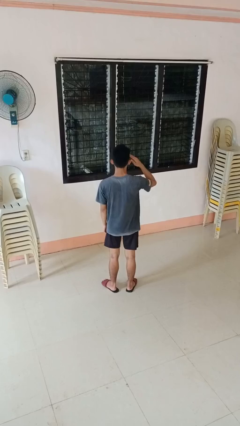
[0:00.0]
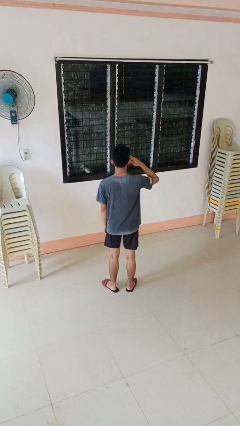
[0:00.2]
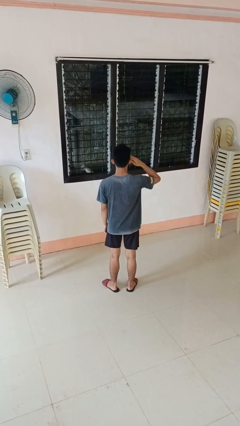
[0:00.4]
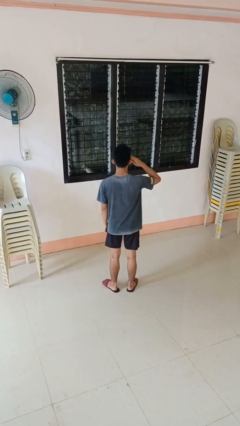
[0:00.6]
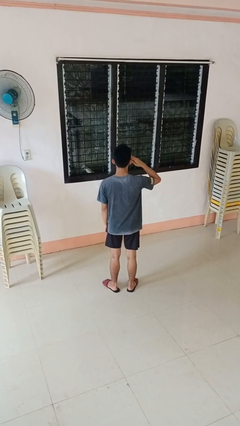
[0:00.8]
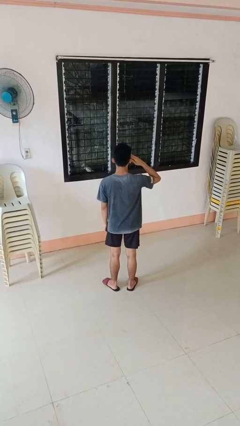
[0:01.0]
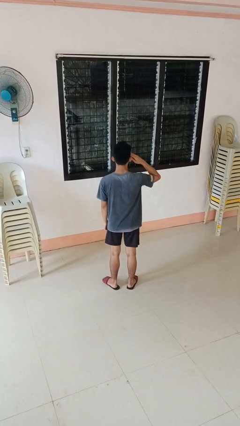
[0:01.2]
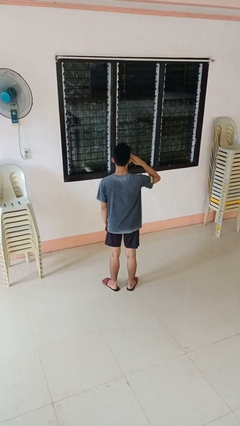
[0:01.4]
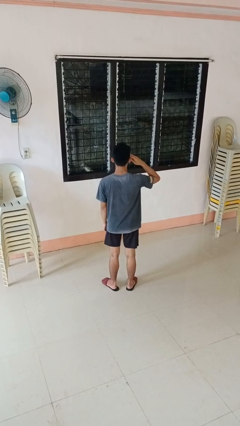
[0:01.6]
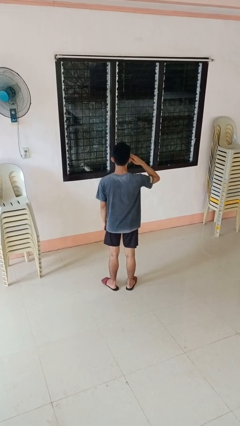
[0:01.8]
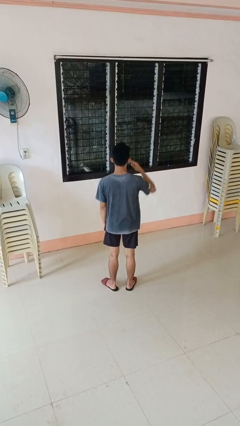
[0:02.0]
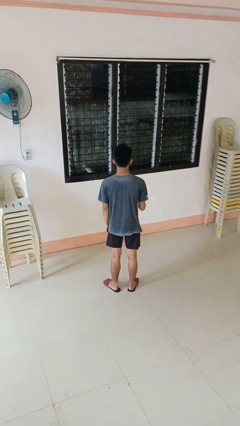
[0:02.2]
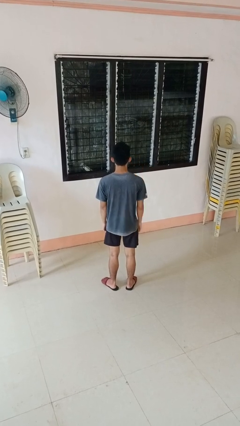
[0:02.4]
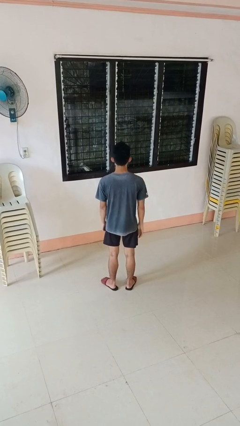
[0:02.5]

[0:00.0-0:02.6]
person salutes

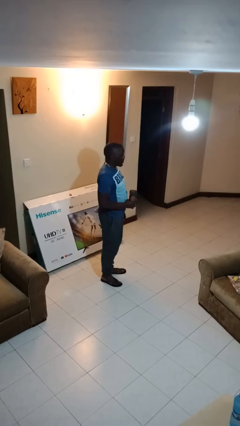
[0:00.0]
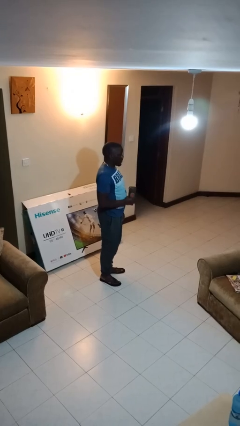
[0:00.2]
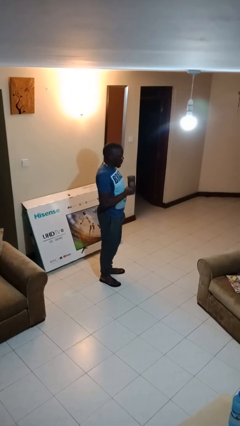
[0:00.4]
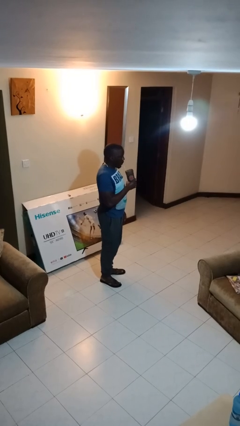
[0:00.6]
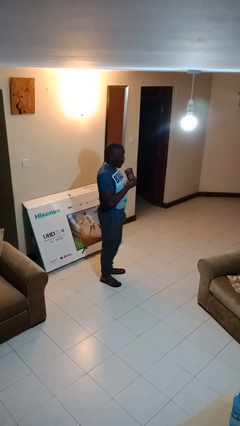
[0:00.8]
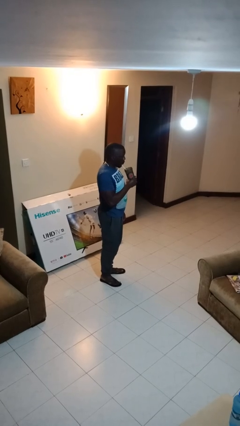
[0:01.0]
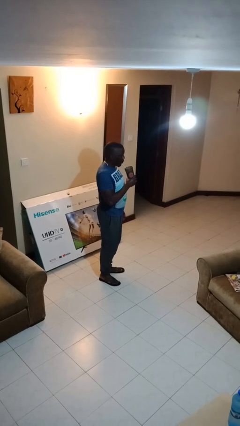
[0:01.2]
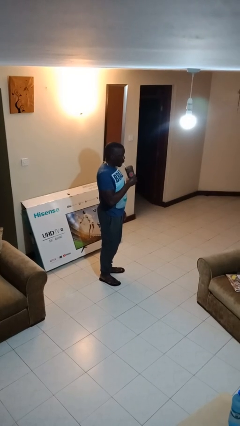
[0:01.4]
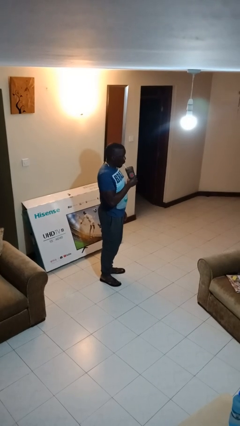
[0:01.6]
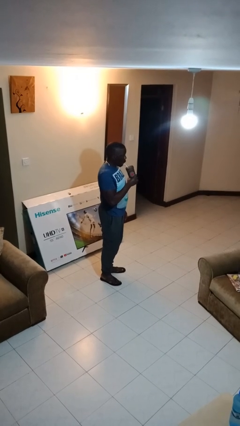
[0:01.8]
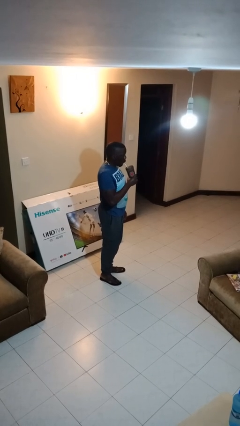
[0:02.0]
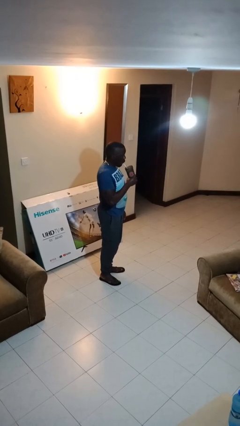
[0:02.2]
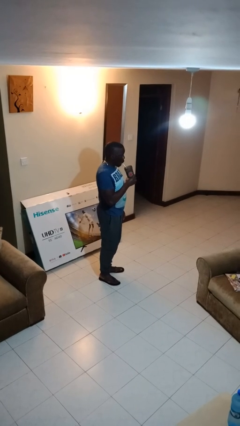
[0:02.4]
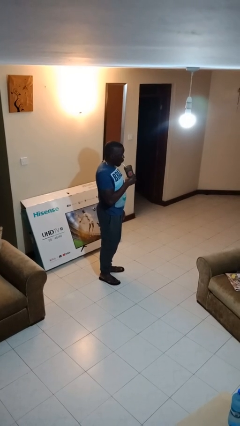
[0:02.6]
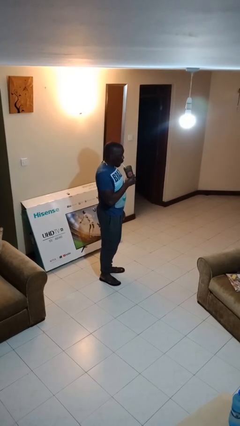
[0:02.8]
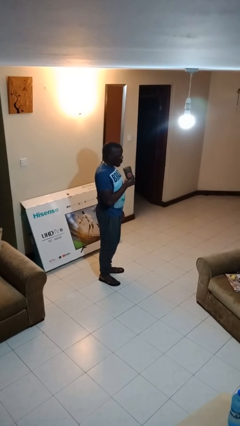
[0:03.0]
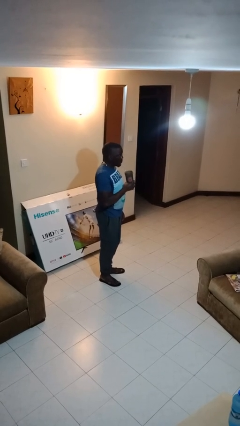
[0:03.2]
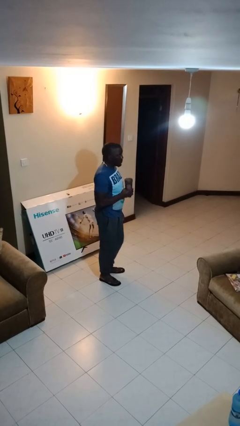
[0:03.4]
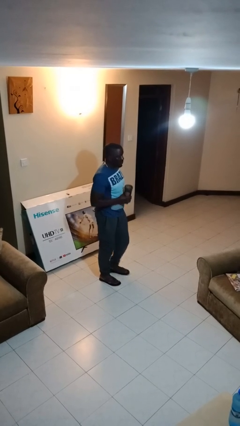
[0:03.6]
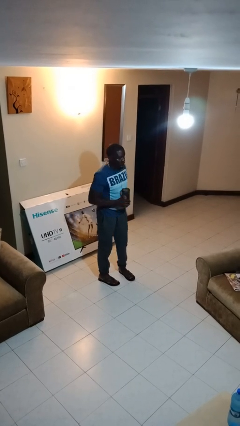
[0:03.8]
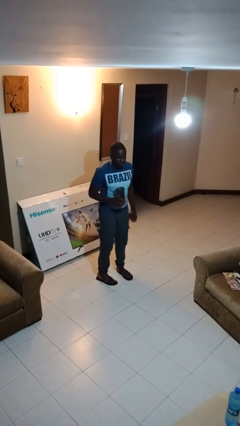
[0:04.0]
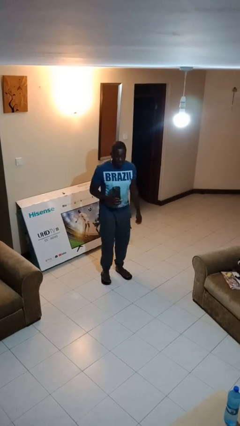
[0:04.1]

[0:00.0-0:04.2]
person drinks from straw

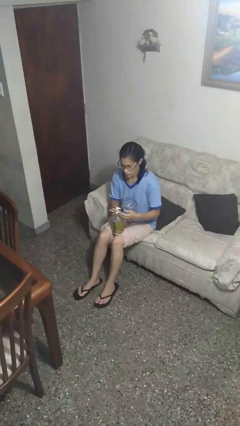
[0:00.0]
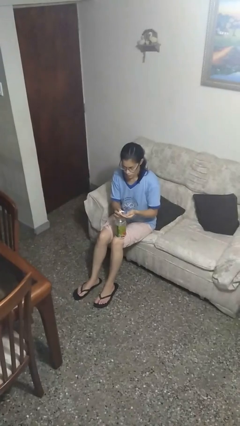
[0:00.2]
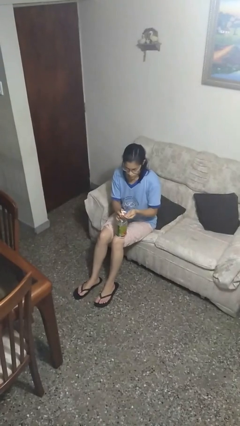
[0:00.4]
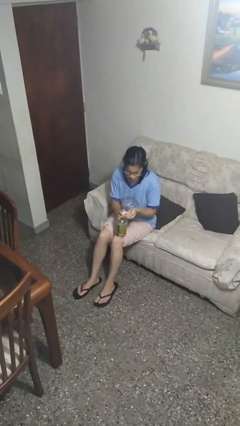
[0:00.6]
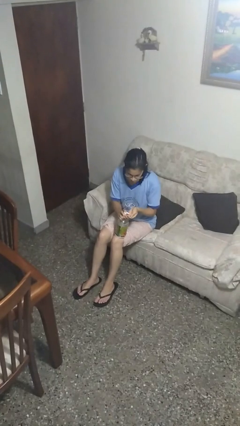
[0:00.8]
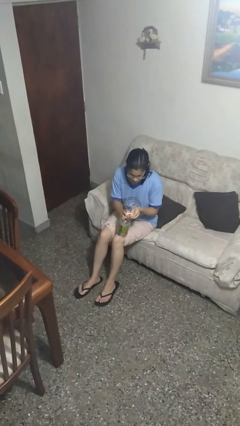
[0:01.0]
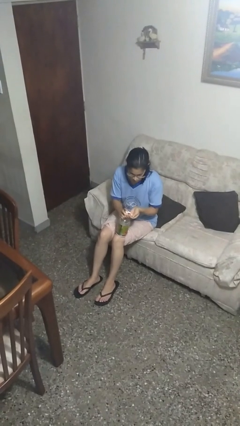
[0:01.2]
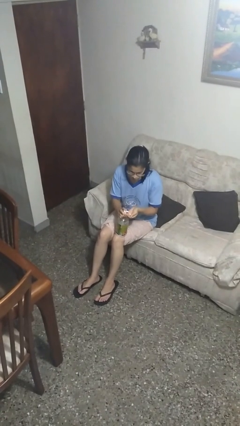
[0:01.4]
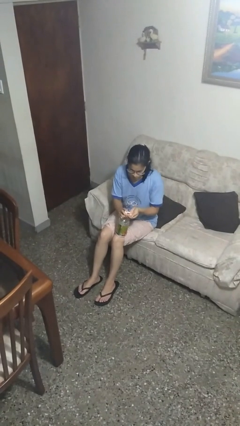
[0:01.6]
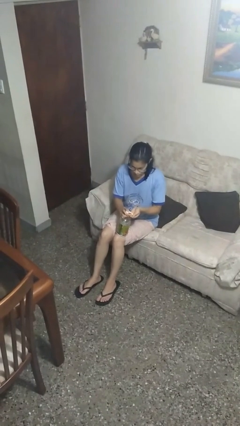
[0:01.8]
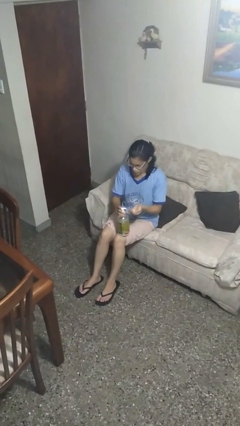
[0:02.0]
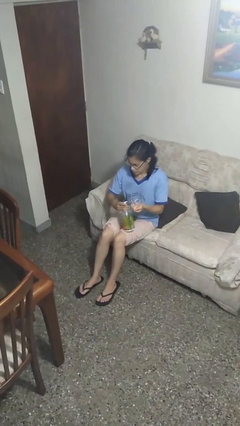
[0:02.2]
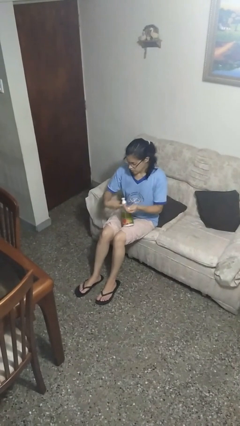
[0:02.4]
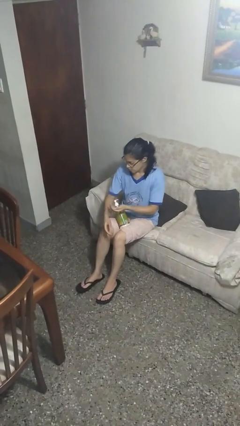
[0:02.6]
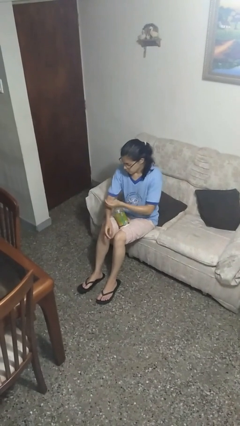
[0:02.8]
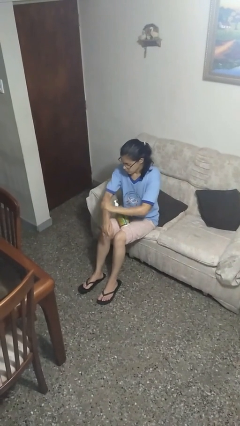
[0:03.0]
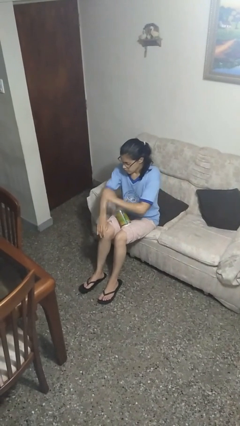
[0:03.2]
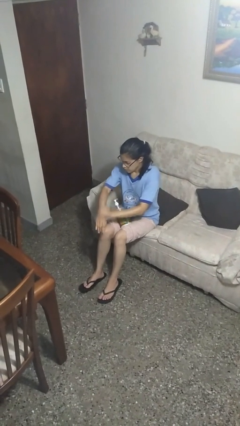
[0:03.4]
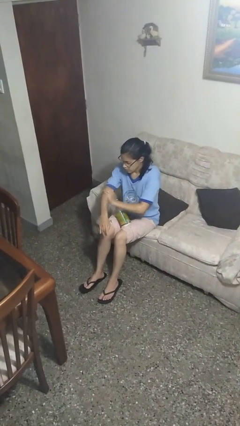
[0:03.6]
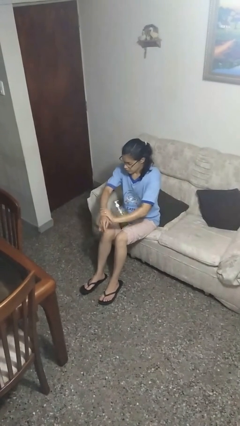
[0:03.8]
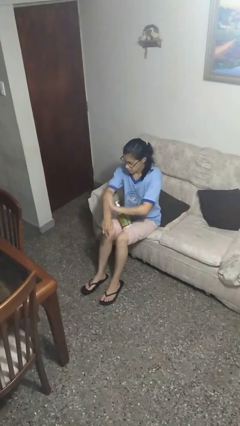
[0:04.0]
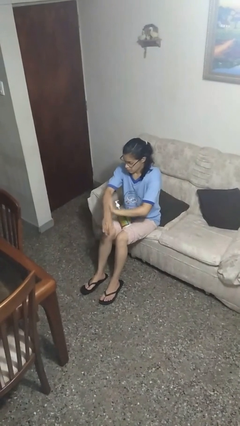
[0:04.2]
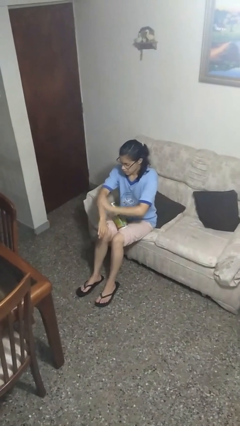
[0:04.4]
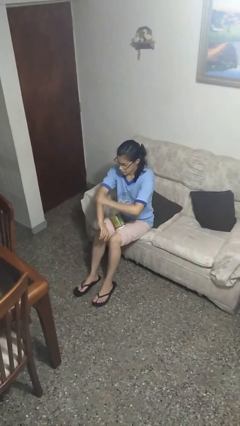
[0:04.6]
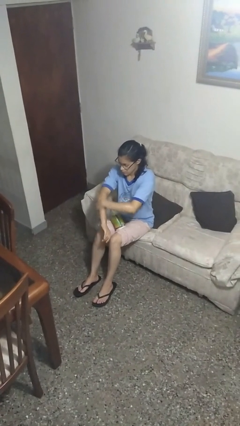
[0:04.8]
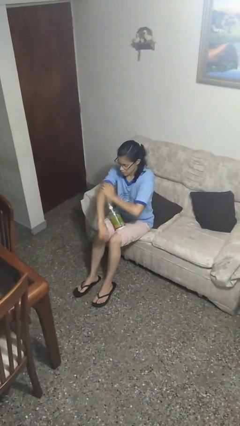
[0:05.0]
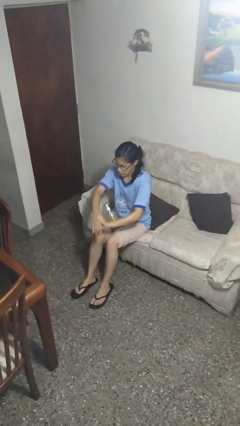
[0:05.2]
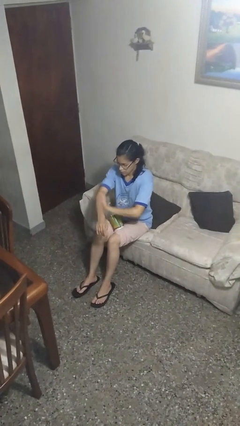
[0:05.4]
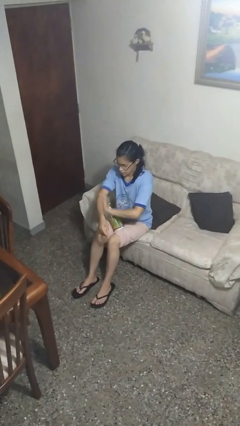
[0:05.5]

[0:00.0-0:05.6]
person applies sunscreen

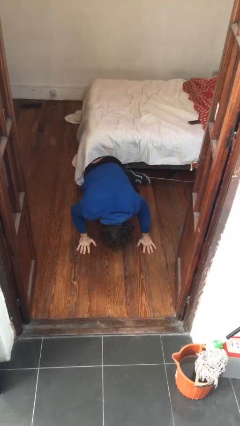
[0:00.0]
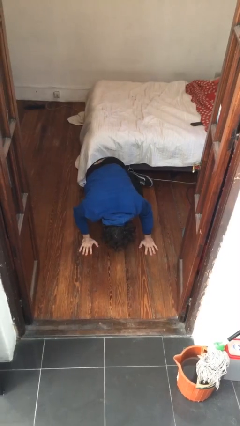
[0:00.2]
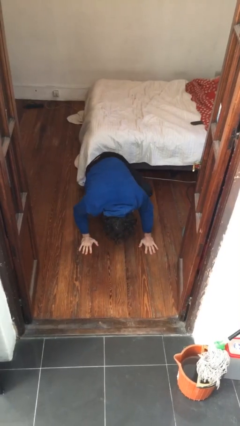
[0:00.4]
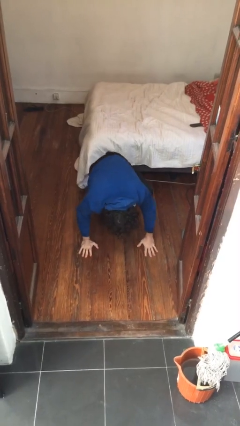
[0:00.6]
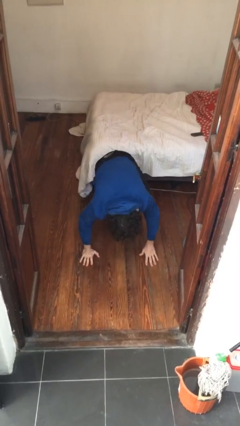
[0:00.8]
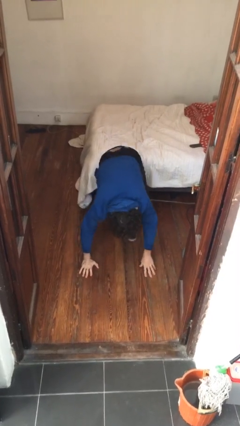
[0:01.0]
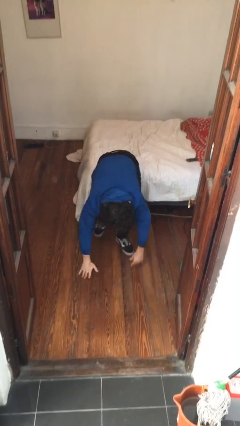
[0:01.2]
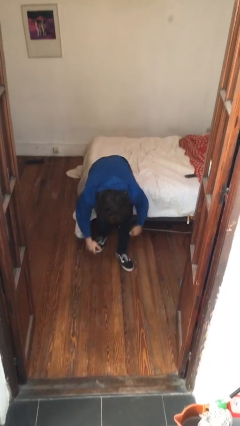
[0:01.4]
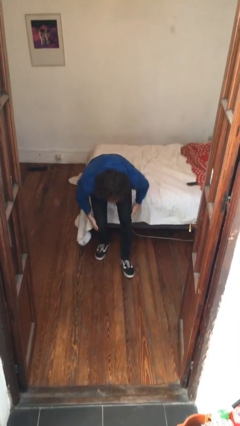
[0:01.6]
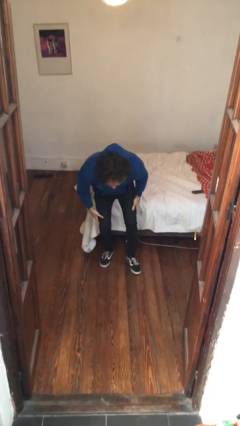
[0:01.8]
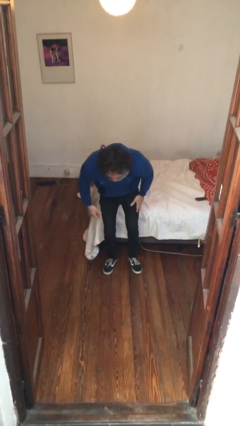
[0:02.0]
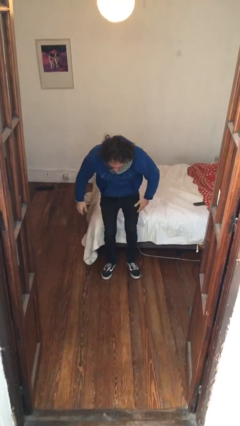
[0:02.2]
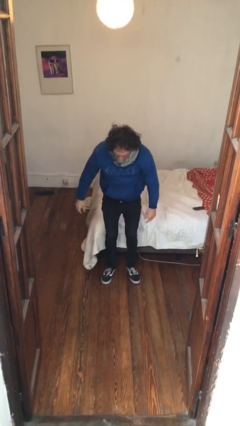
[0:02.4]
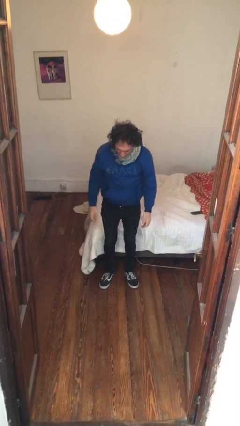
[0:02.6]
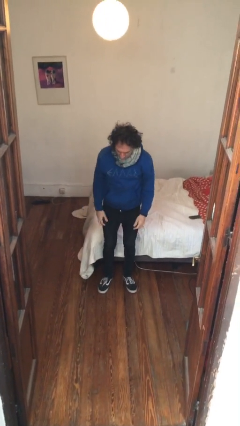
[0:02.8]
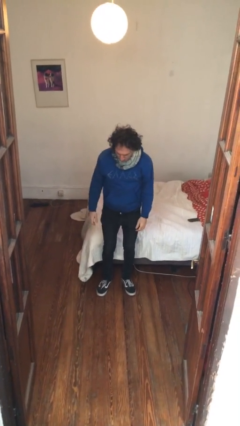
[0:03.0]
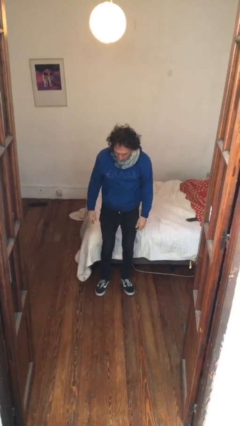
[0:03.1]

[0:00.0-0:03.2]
person stands up from floor

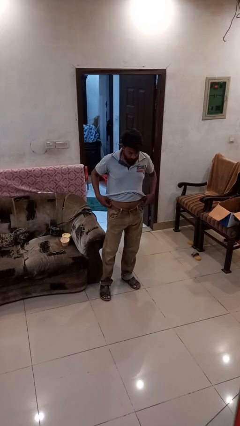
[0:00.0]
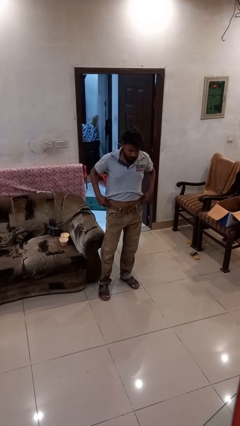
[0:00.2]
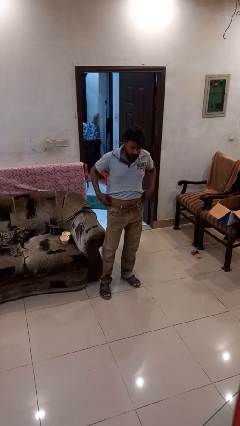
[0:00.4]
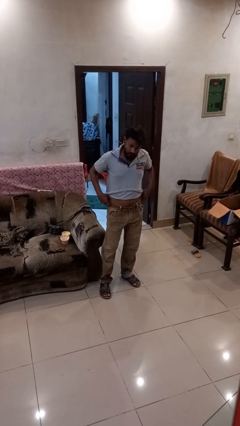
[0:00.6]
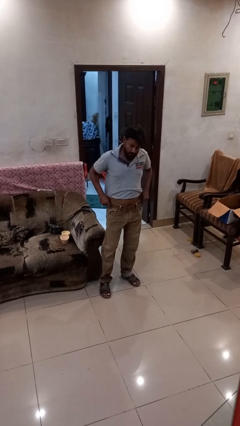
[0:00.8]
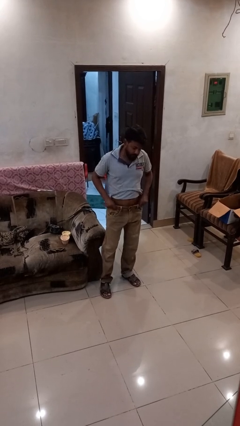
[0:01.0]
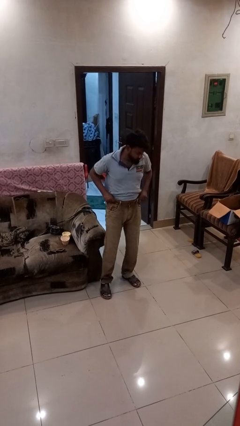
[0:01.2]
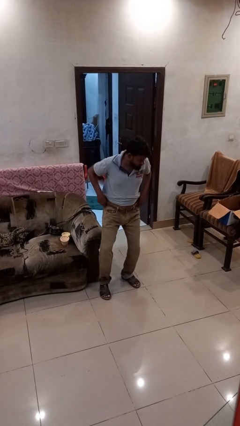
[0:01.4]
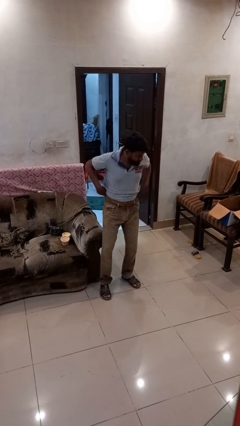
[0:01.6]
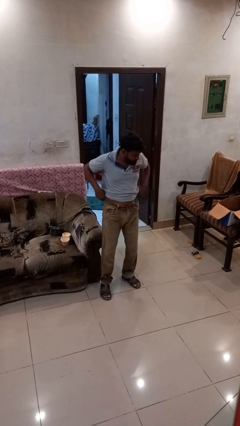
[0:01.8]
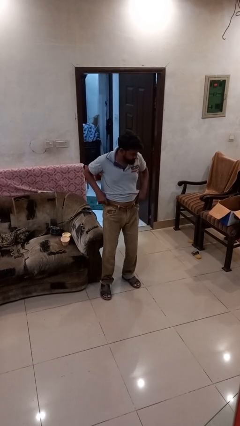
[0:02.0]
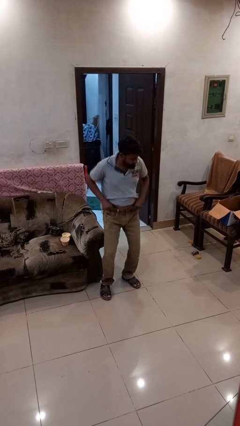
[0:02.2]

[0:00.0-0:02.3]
person hikes up pants

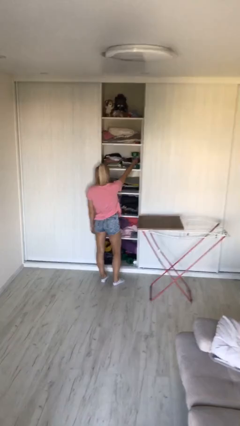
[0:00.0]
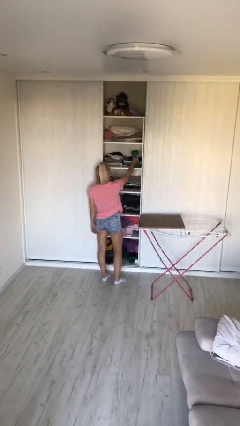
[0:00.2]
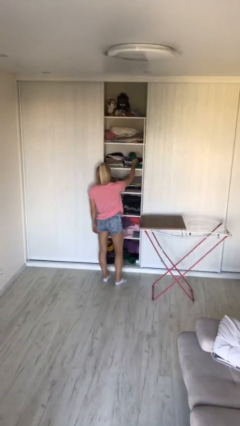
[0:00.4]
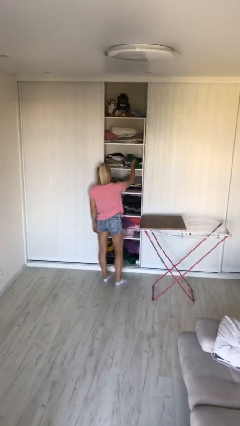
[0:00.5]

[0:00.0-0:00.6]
person picks up object from shelf
